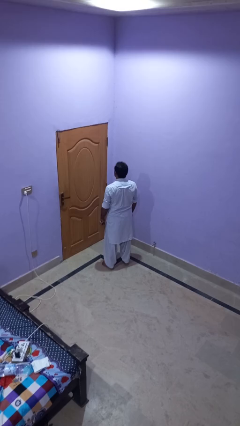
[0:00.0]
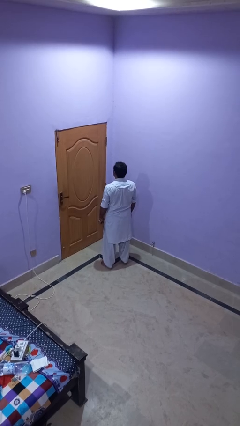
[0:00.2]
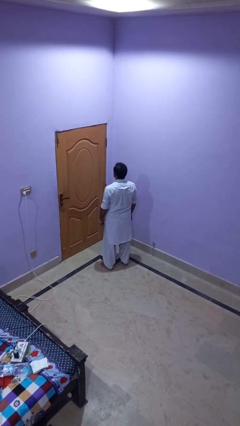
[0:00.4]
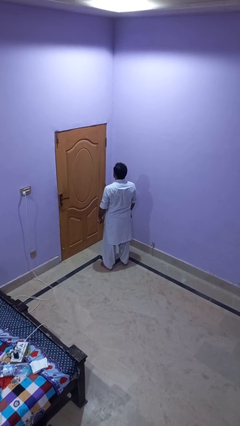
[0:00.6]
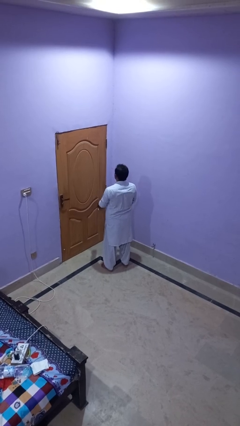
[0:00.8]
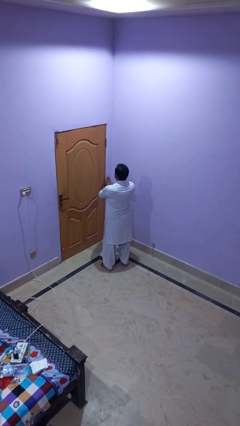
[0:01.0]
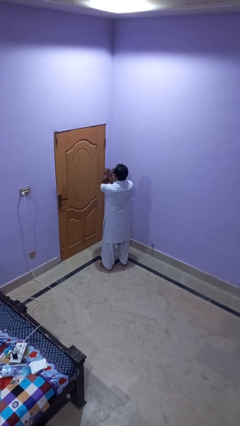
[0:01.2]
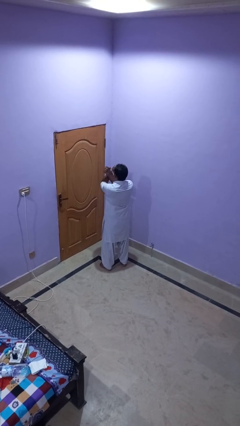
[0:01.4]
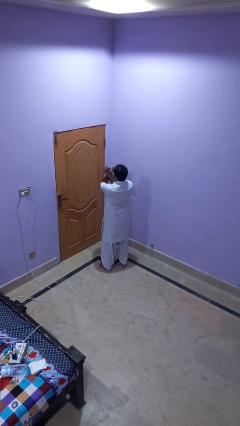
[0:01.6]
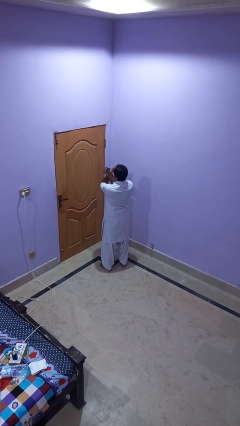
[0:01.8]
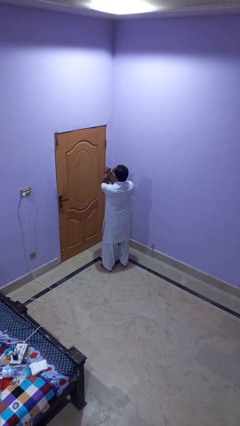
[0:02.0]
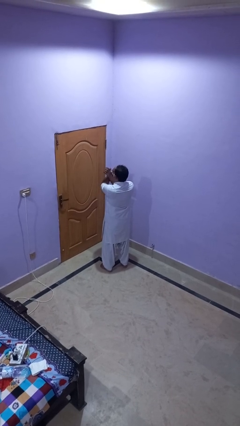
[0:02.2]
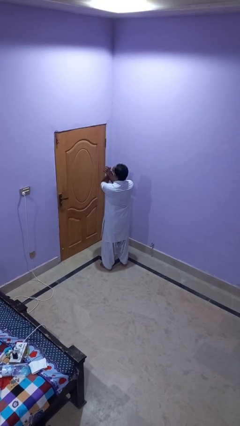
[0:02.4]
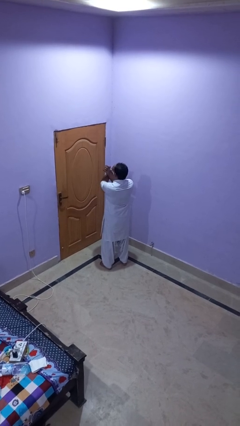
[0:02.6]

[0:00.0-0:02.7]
person crosses arms

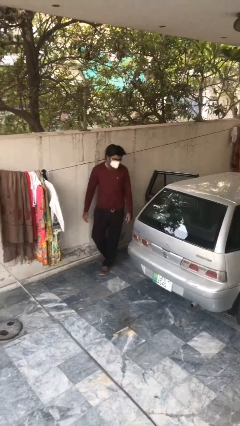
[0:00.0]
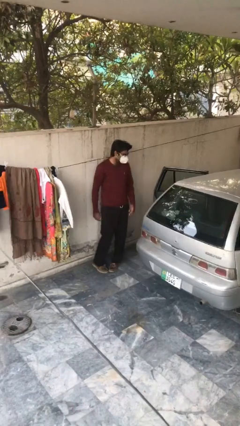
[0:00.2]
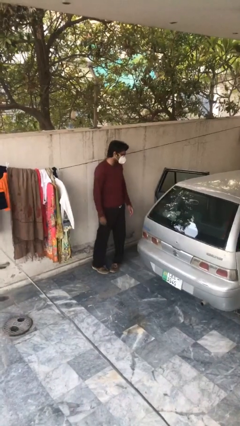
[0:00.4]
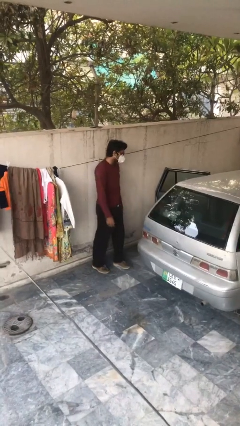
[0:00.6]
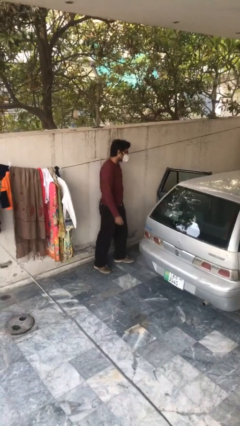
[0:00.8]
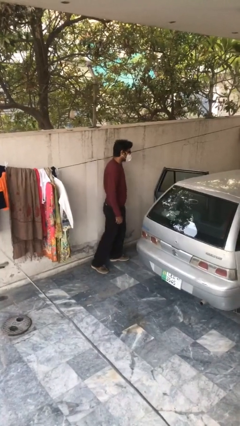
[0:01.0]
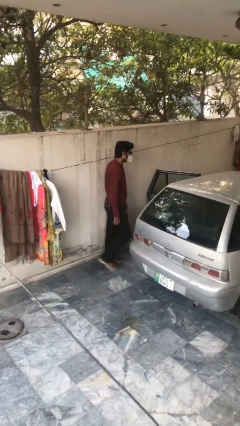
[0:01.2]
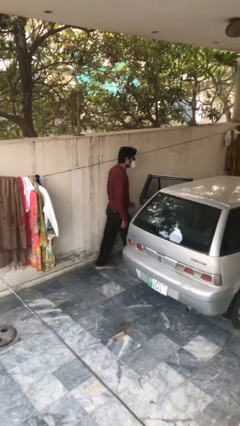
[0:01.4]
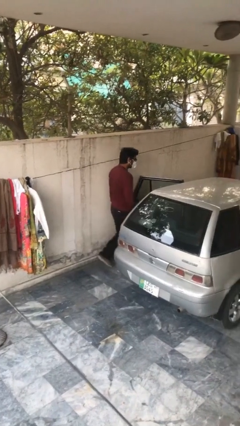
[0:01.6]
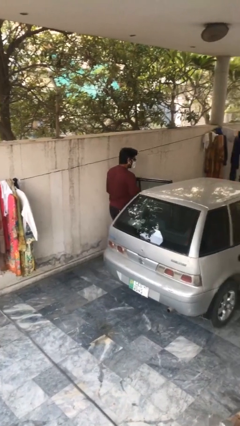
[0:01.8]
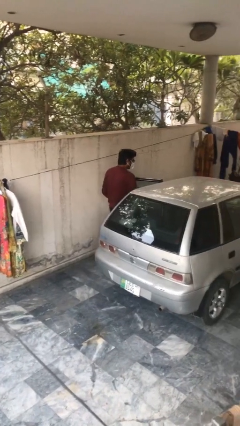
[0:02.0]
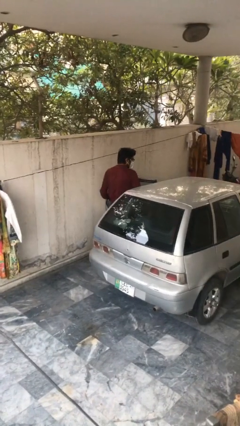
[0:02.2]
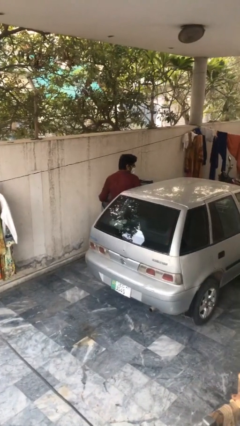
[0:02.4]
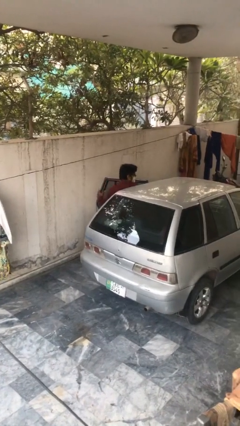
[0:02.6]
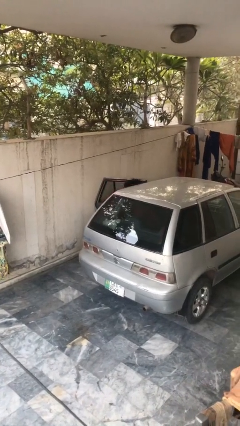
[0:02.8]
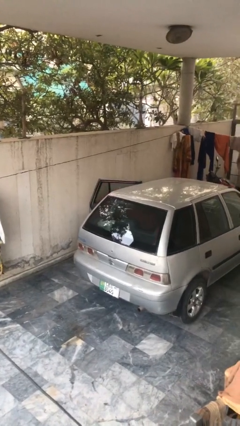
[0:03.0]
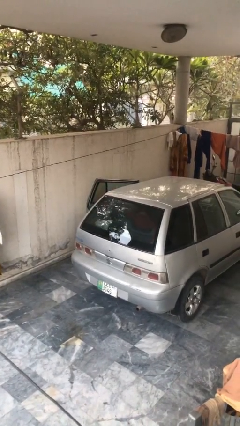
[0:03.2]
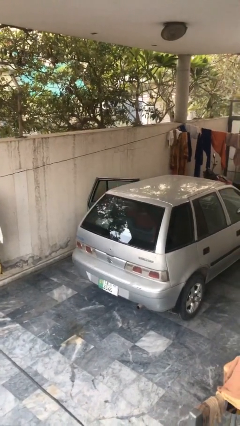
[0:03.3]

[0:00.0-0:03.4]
person enters car

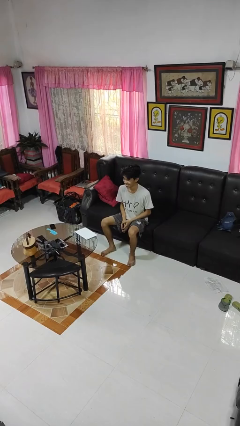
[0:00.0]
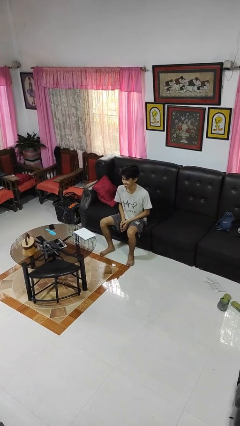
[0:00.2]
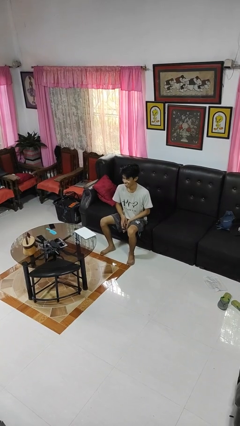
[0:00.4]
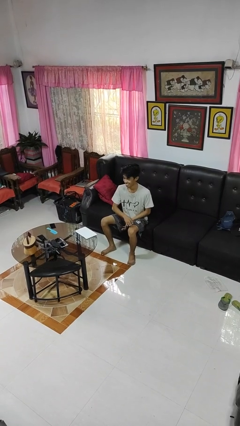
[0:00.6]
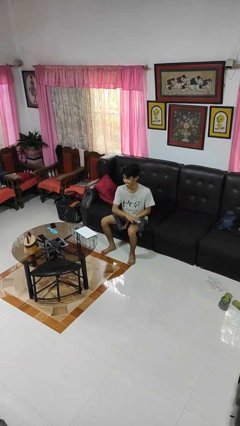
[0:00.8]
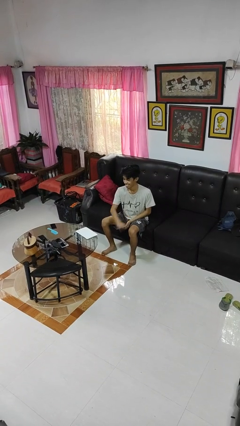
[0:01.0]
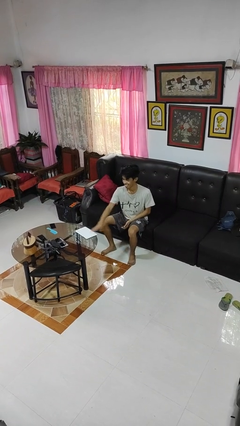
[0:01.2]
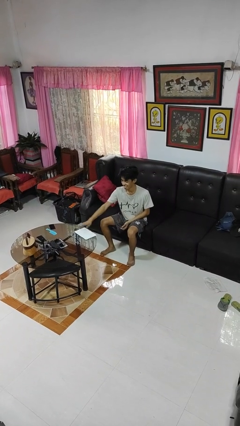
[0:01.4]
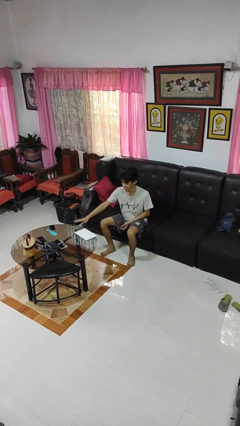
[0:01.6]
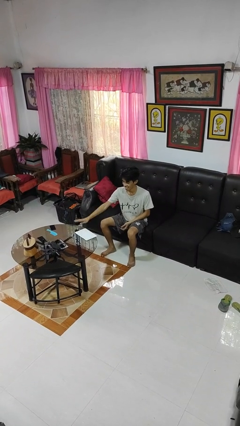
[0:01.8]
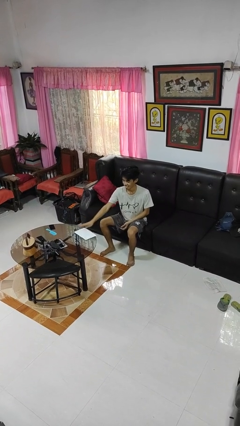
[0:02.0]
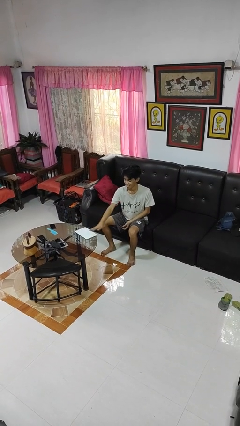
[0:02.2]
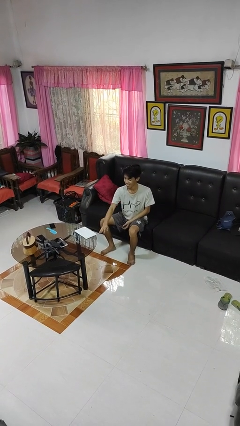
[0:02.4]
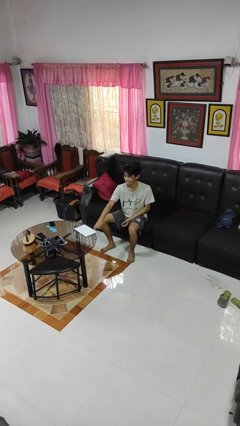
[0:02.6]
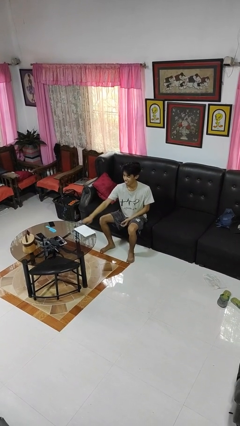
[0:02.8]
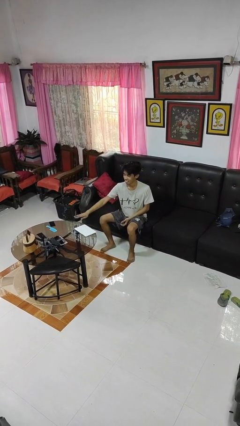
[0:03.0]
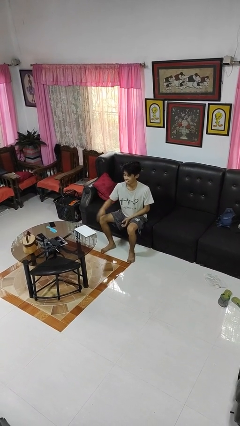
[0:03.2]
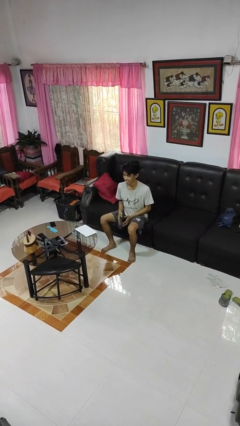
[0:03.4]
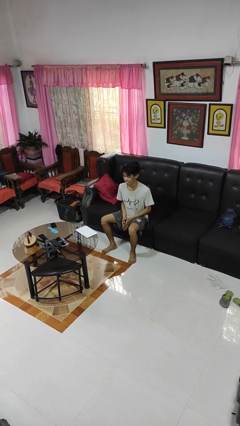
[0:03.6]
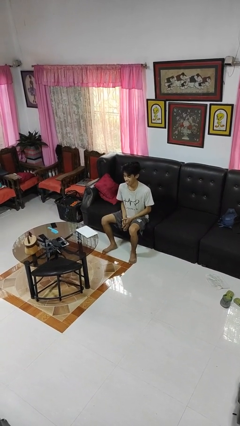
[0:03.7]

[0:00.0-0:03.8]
person waves hand over object

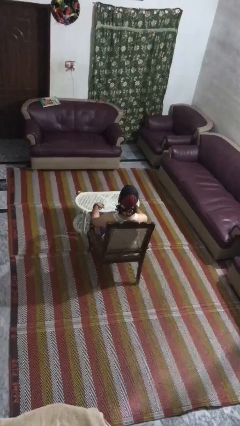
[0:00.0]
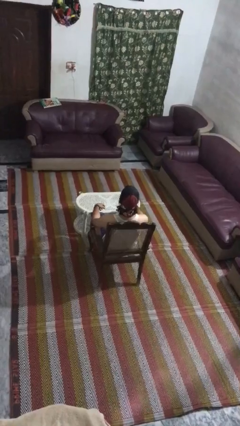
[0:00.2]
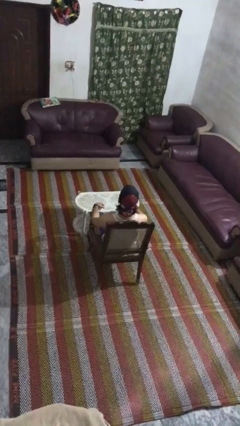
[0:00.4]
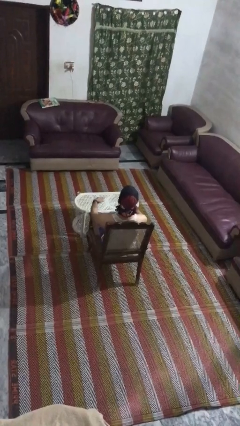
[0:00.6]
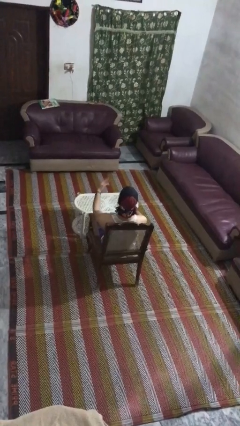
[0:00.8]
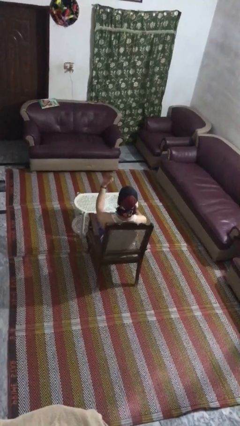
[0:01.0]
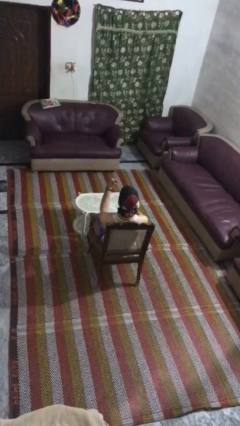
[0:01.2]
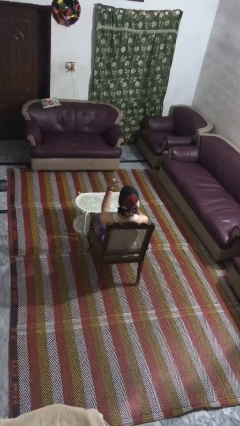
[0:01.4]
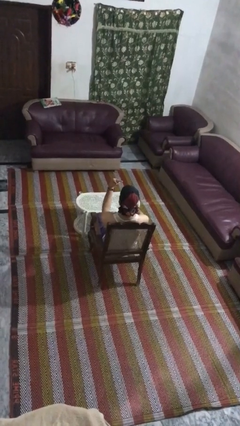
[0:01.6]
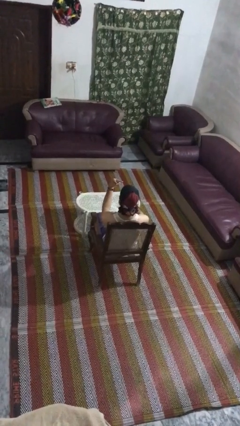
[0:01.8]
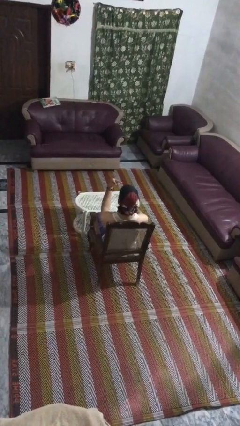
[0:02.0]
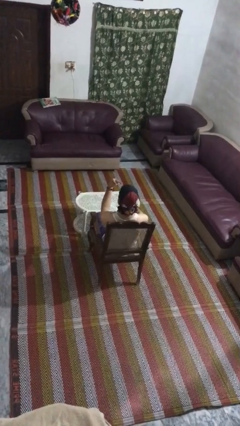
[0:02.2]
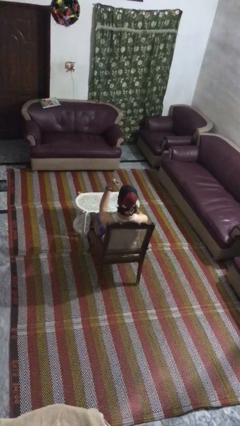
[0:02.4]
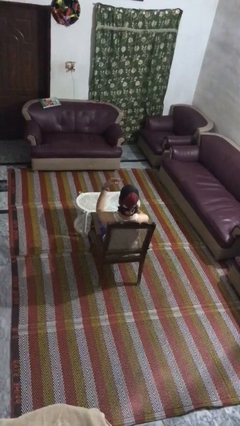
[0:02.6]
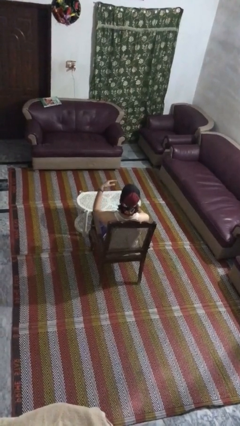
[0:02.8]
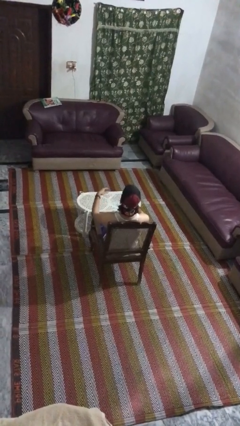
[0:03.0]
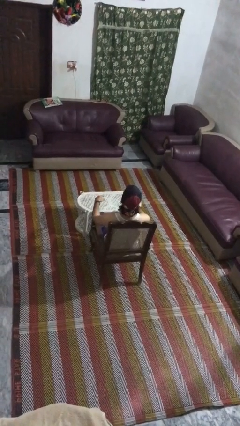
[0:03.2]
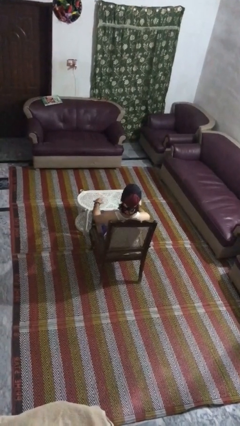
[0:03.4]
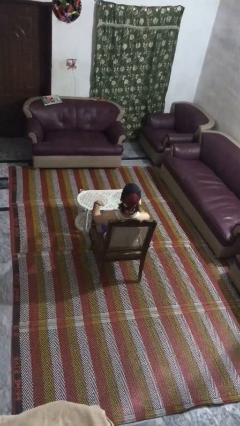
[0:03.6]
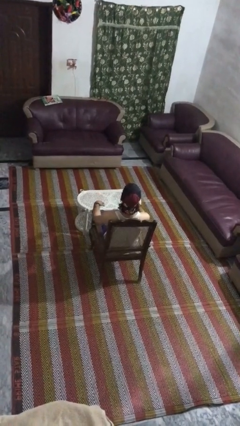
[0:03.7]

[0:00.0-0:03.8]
person gestures watch closely

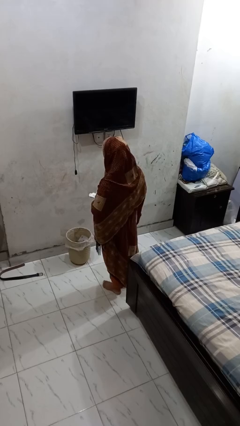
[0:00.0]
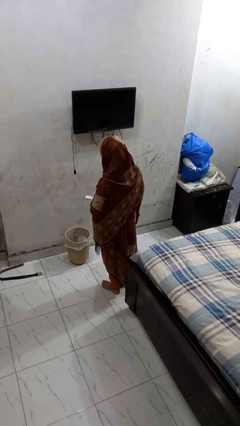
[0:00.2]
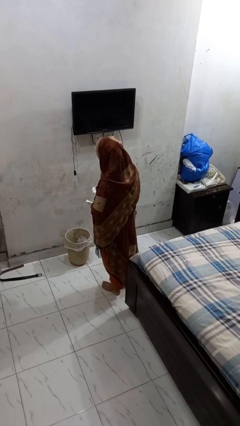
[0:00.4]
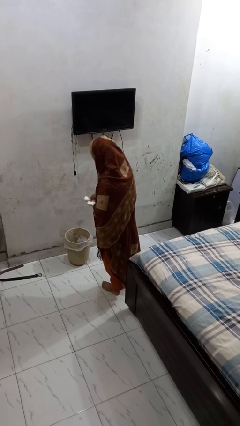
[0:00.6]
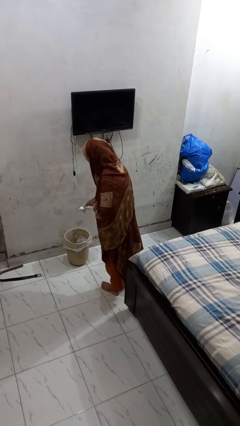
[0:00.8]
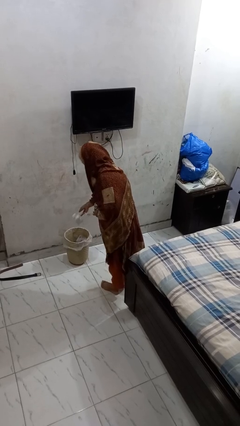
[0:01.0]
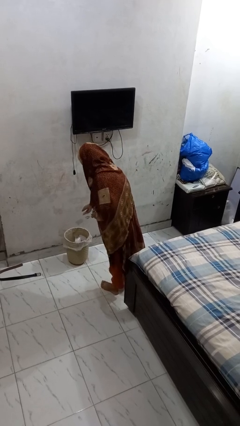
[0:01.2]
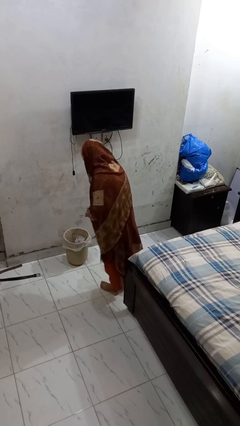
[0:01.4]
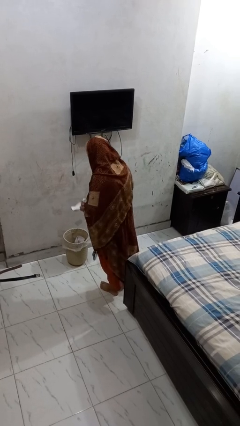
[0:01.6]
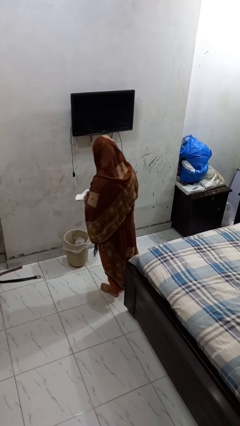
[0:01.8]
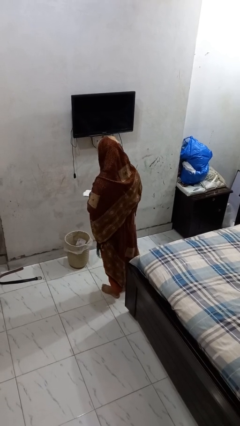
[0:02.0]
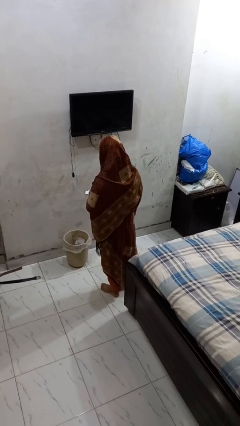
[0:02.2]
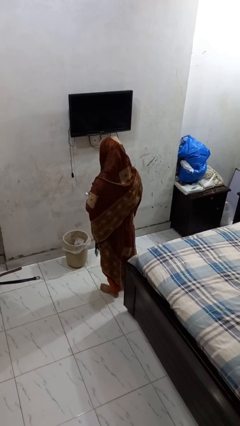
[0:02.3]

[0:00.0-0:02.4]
person discards trash

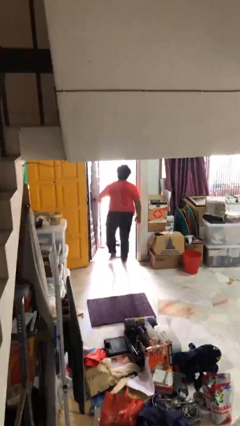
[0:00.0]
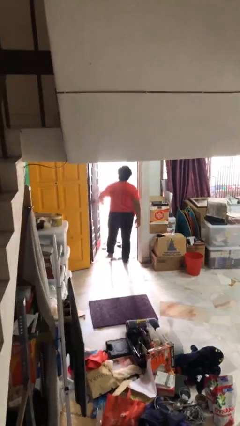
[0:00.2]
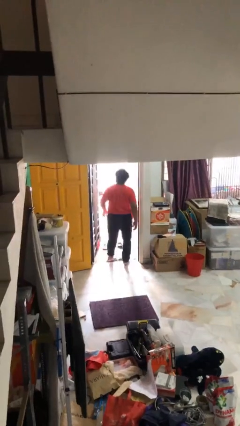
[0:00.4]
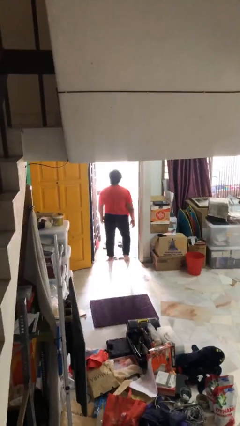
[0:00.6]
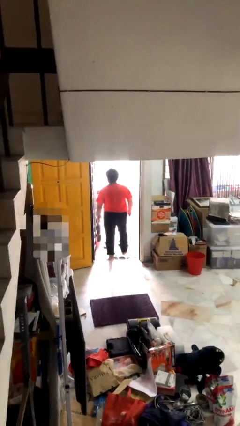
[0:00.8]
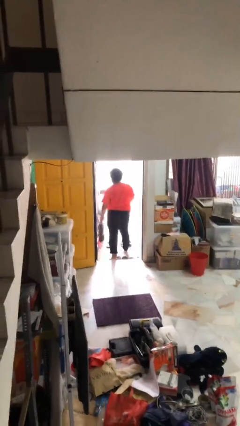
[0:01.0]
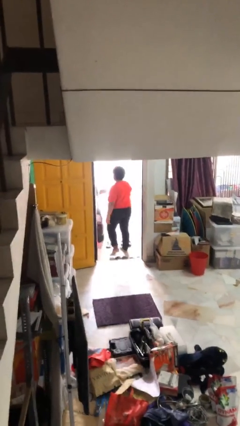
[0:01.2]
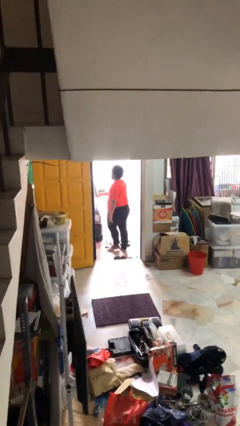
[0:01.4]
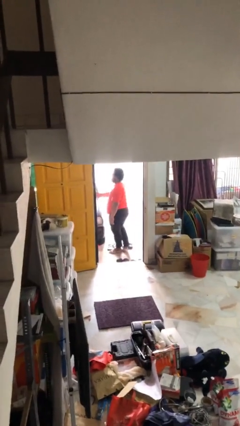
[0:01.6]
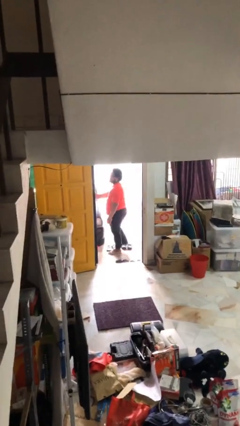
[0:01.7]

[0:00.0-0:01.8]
person exits scene through structure

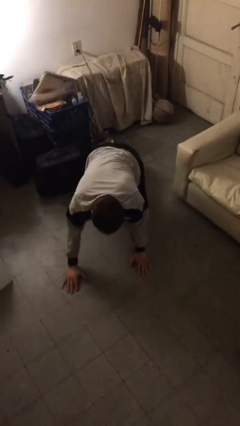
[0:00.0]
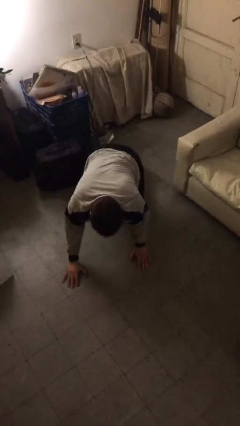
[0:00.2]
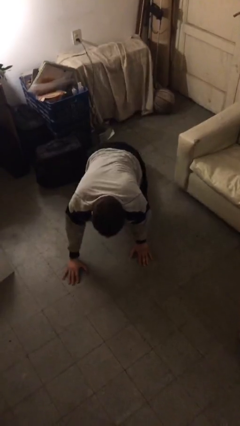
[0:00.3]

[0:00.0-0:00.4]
person crawls
